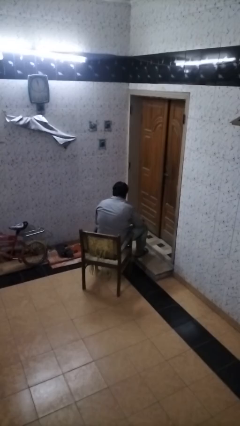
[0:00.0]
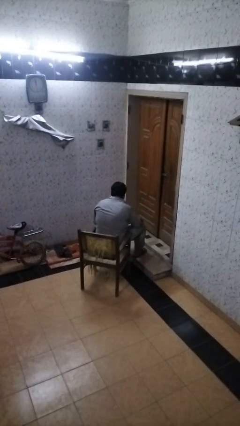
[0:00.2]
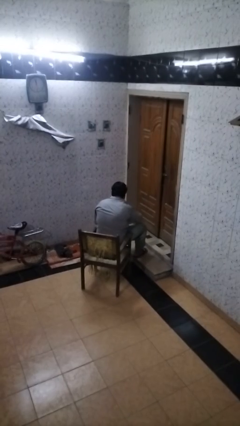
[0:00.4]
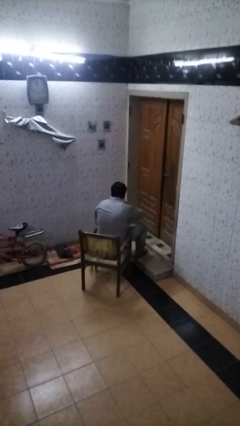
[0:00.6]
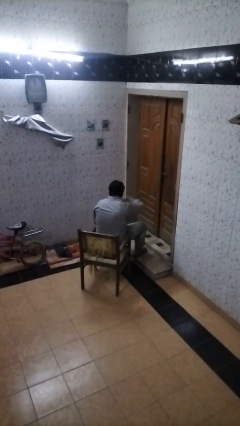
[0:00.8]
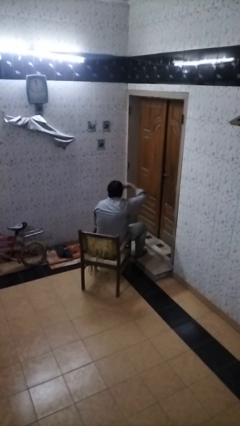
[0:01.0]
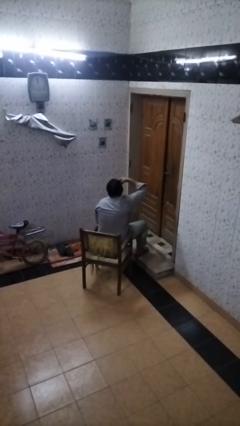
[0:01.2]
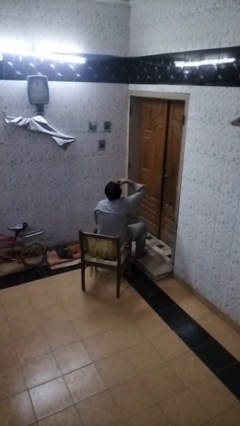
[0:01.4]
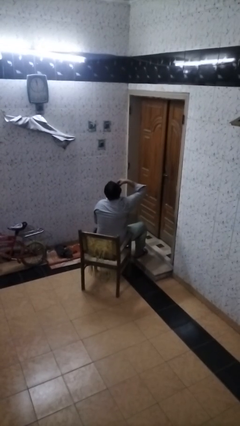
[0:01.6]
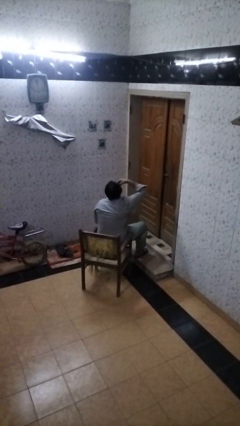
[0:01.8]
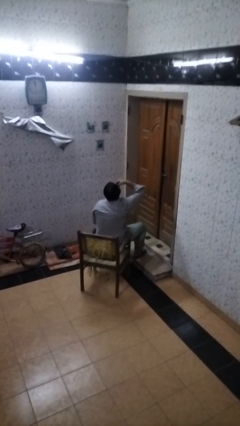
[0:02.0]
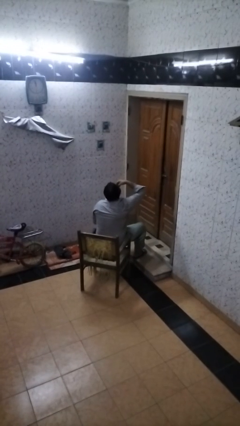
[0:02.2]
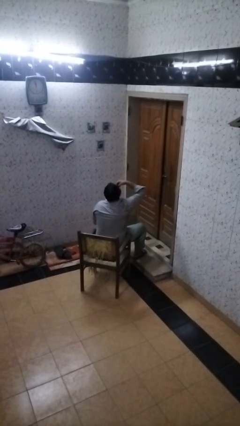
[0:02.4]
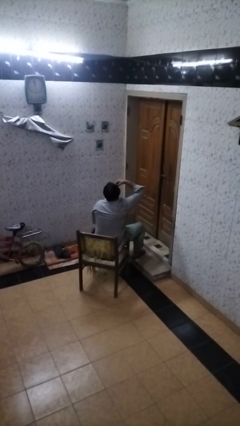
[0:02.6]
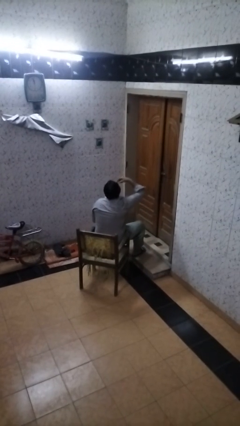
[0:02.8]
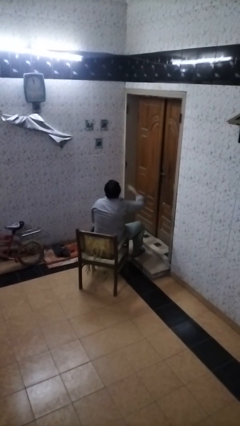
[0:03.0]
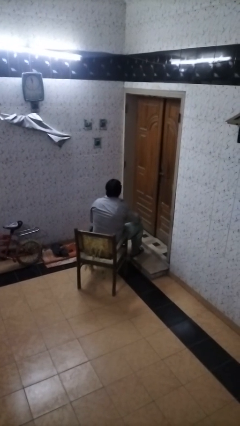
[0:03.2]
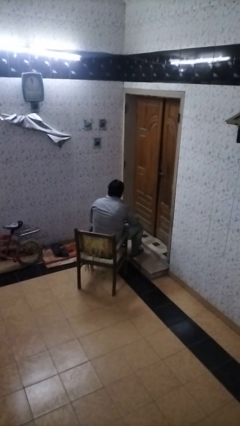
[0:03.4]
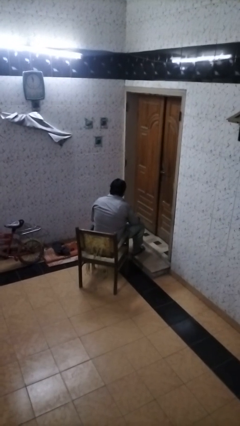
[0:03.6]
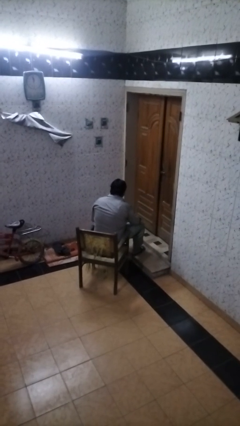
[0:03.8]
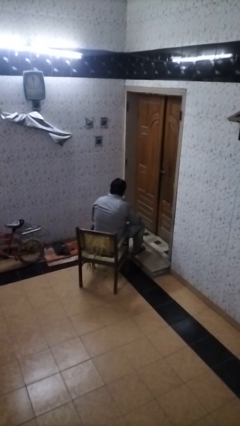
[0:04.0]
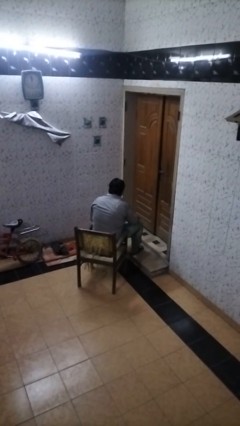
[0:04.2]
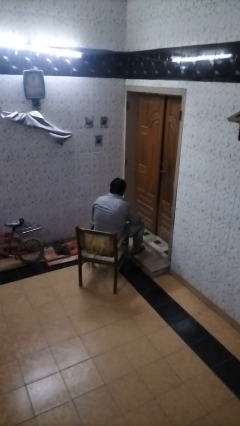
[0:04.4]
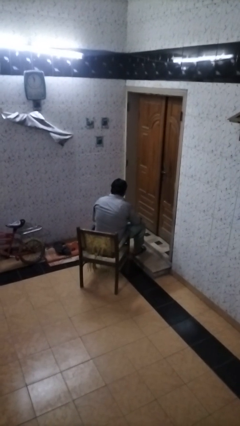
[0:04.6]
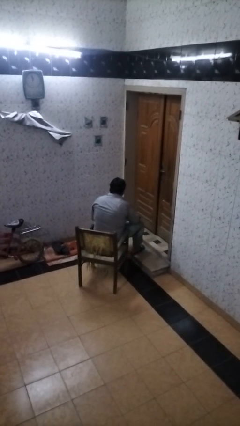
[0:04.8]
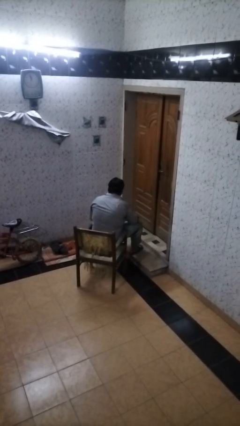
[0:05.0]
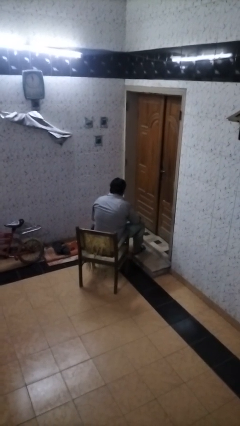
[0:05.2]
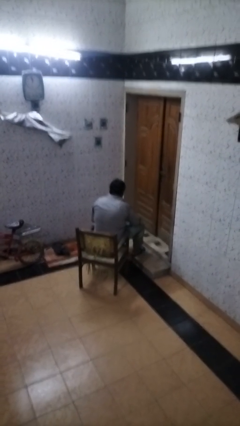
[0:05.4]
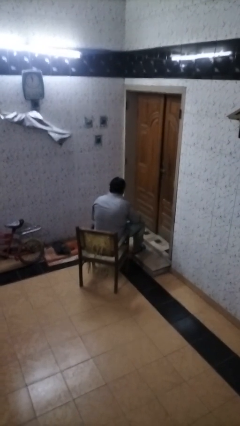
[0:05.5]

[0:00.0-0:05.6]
person eats with hands

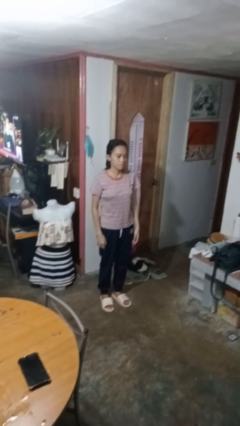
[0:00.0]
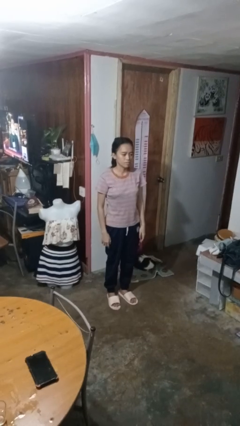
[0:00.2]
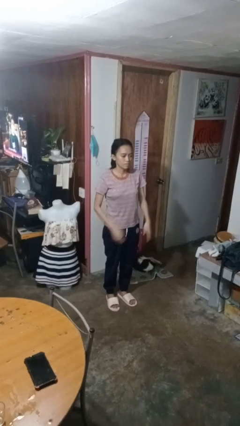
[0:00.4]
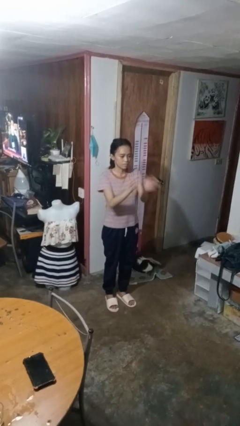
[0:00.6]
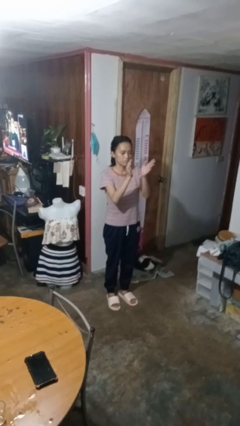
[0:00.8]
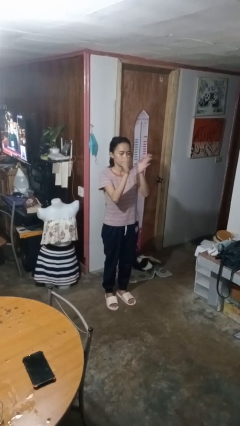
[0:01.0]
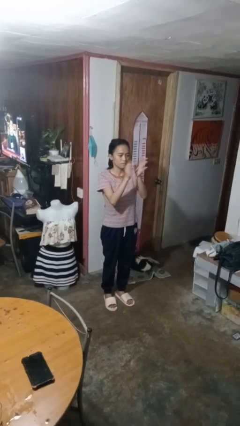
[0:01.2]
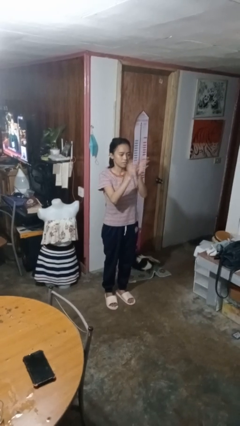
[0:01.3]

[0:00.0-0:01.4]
person claps hands

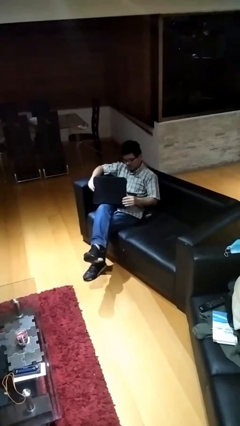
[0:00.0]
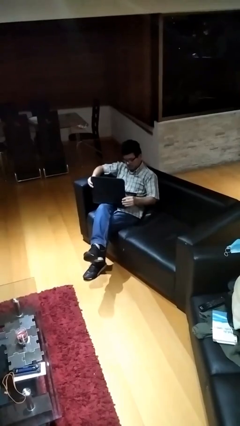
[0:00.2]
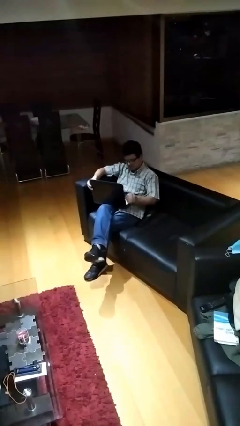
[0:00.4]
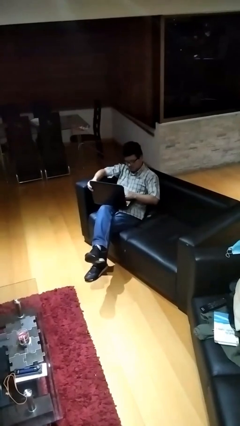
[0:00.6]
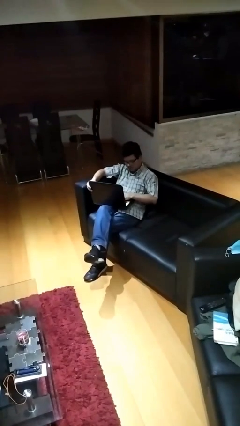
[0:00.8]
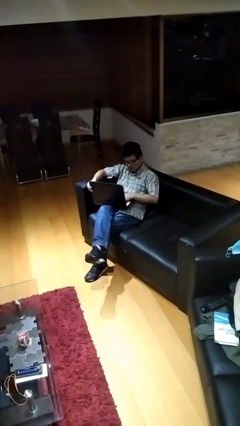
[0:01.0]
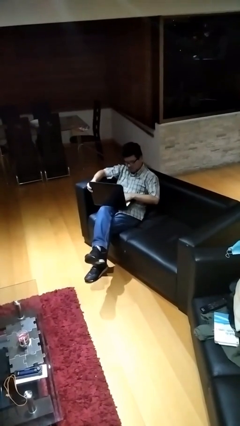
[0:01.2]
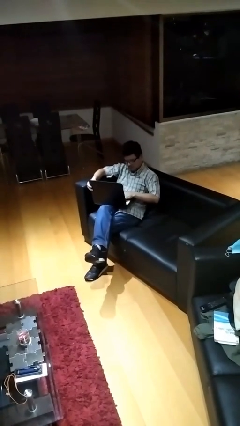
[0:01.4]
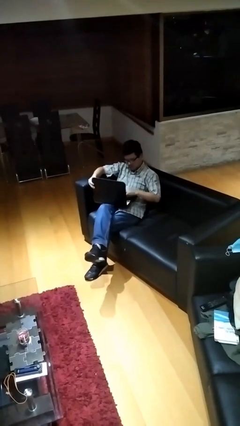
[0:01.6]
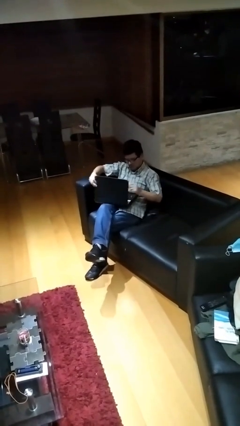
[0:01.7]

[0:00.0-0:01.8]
person interacts with laptop

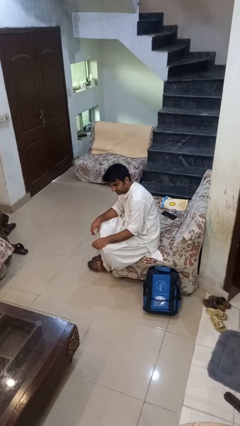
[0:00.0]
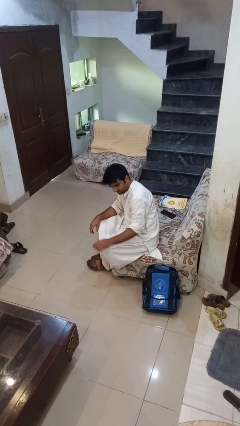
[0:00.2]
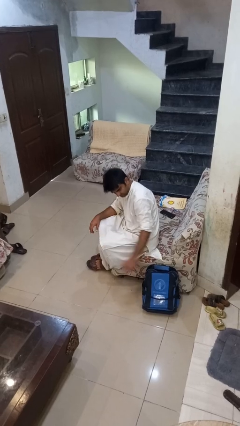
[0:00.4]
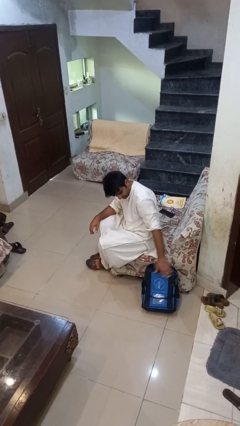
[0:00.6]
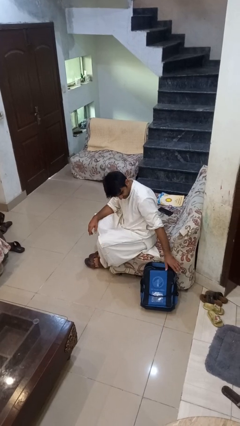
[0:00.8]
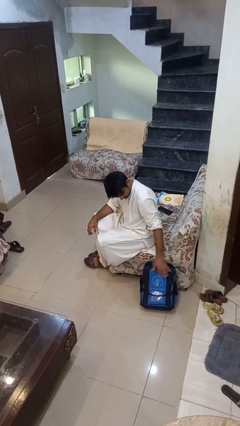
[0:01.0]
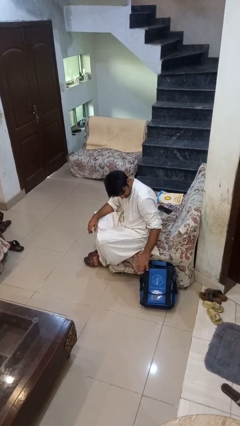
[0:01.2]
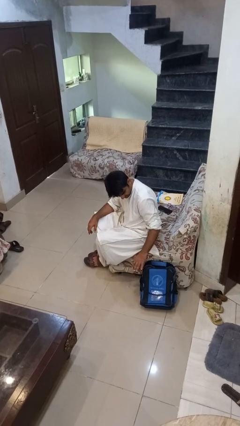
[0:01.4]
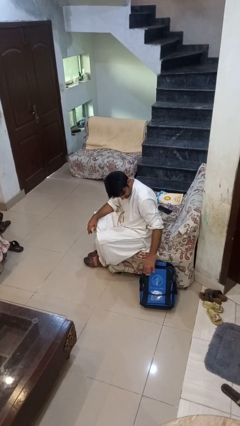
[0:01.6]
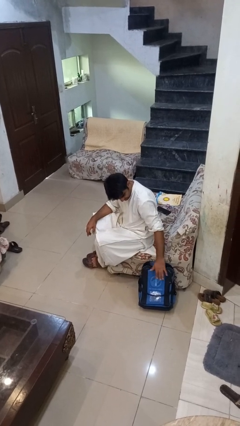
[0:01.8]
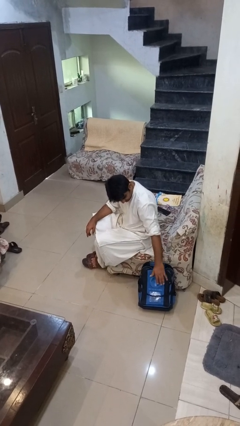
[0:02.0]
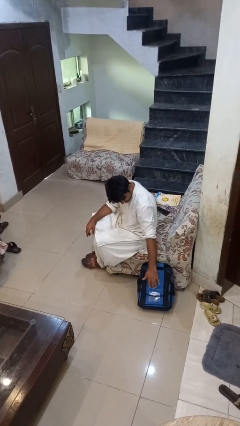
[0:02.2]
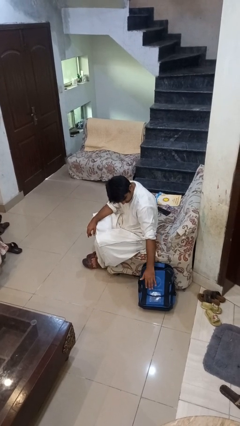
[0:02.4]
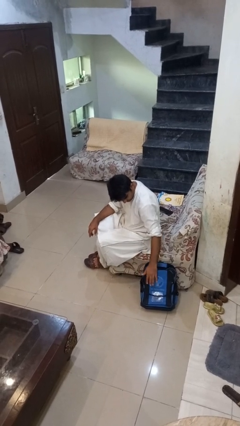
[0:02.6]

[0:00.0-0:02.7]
person waves hand over object

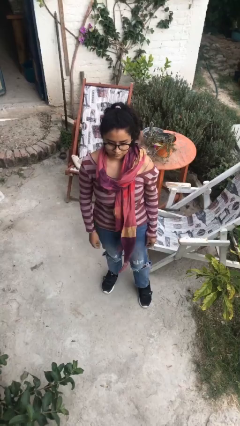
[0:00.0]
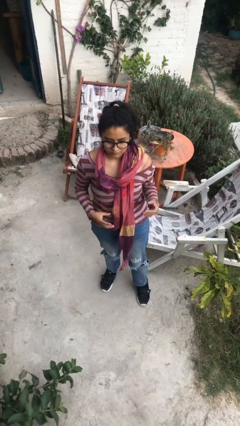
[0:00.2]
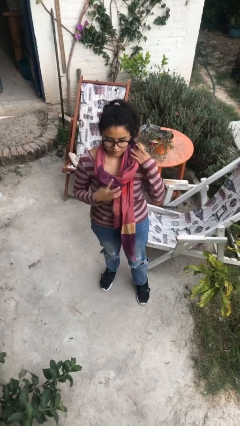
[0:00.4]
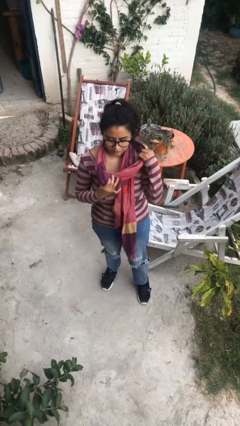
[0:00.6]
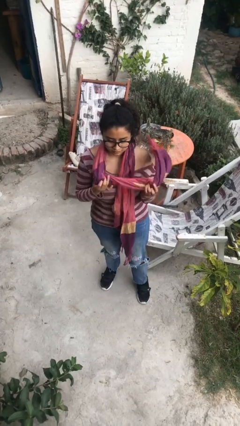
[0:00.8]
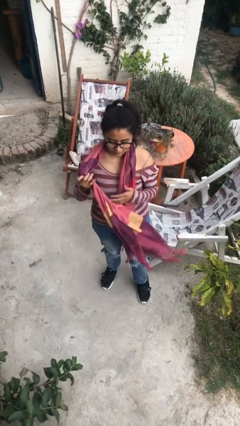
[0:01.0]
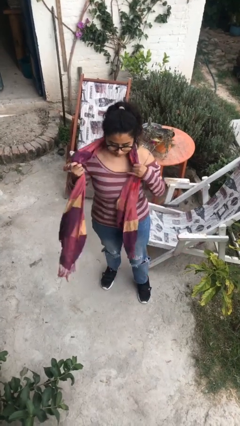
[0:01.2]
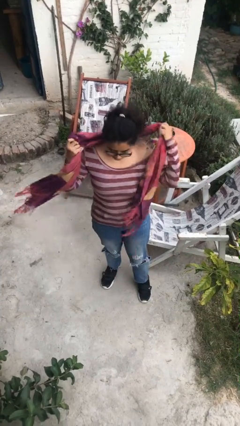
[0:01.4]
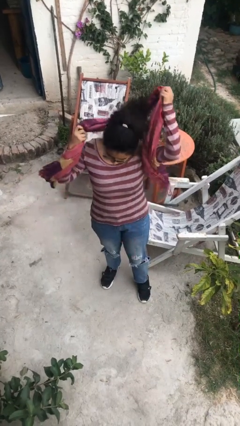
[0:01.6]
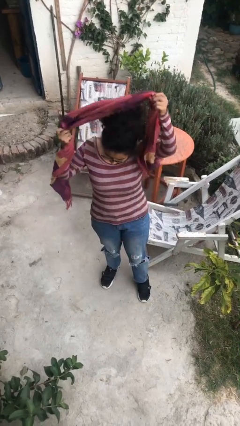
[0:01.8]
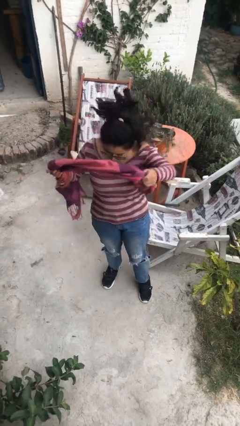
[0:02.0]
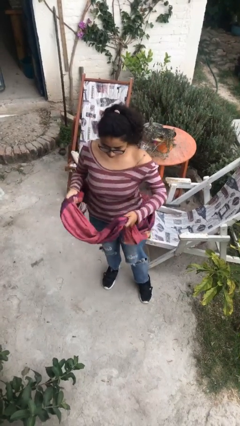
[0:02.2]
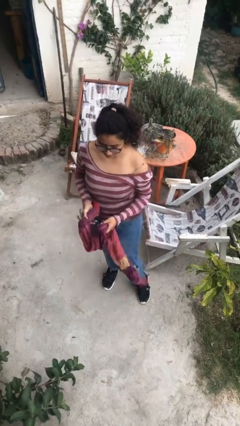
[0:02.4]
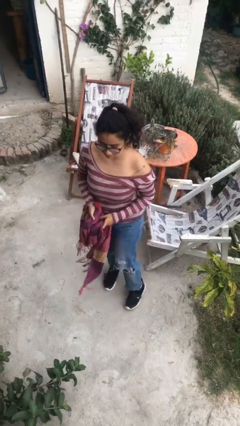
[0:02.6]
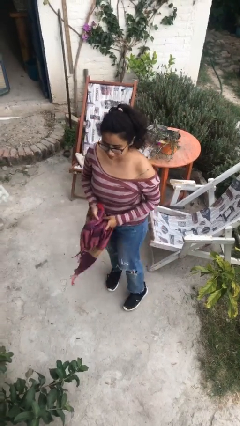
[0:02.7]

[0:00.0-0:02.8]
person takes off scarf

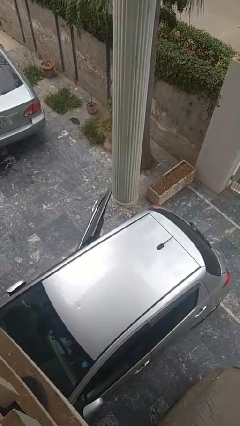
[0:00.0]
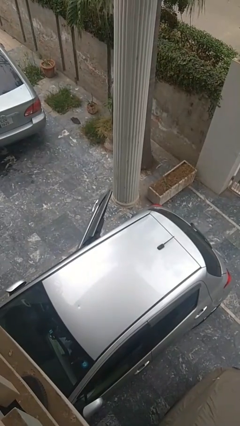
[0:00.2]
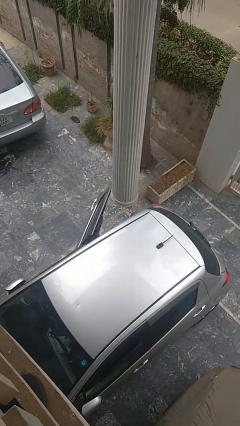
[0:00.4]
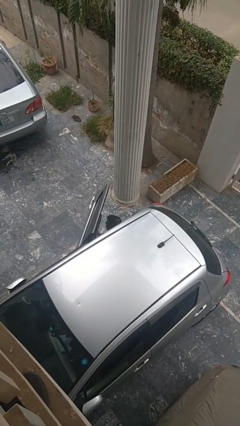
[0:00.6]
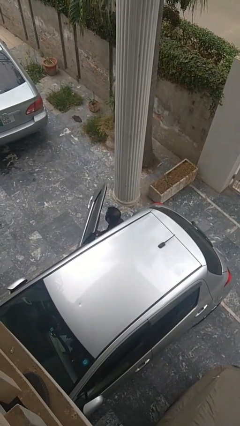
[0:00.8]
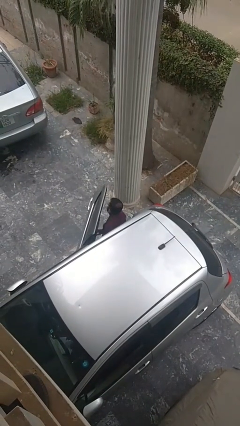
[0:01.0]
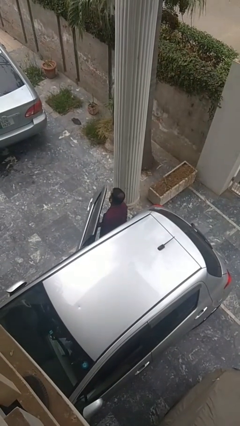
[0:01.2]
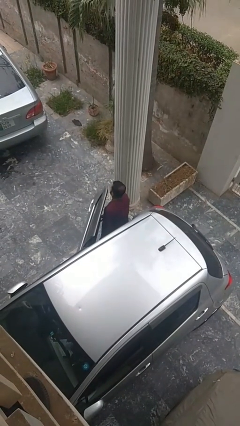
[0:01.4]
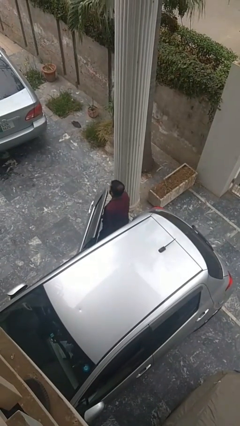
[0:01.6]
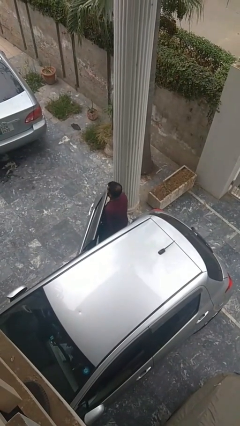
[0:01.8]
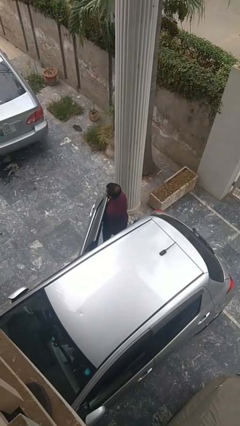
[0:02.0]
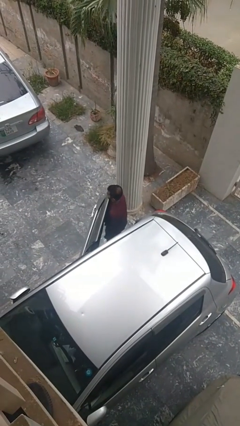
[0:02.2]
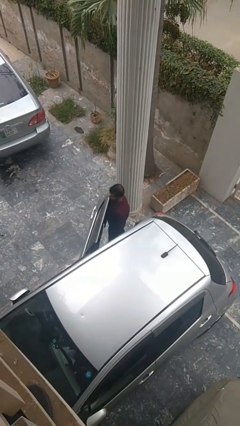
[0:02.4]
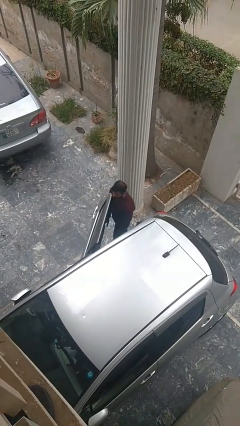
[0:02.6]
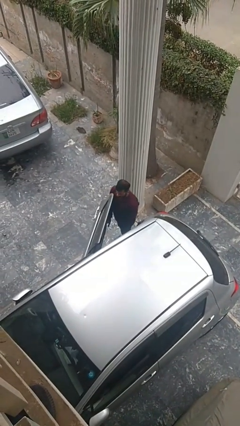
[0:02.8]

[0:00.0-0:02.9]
person exits car

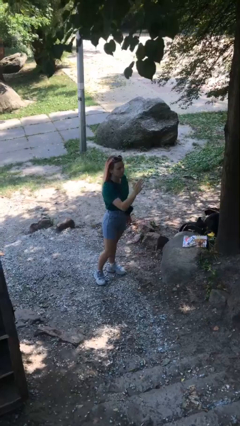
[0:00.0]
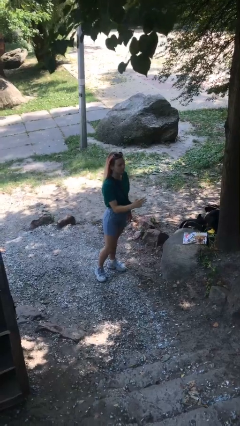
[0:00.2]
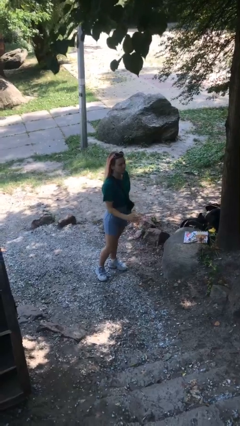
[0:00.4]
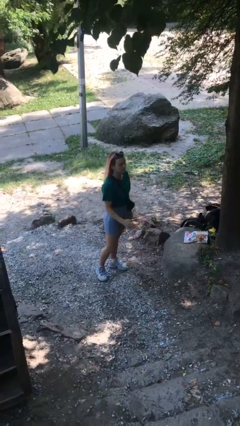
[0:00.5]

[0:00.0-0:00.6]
person gestures lower hand
